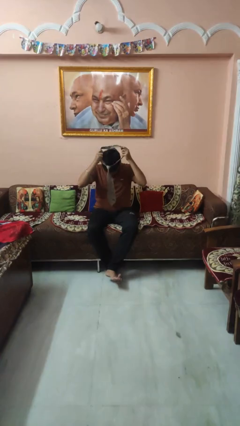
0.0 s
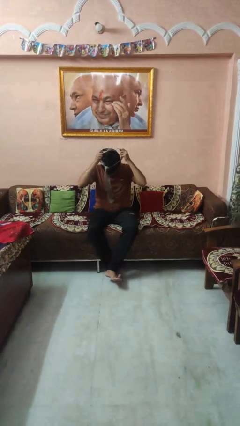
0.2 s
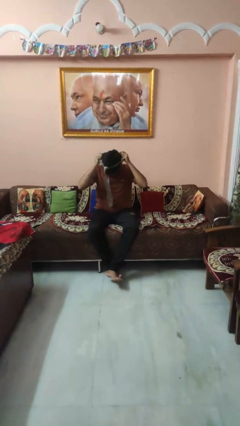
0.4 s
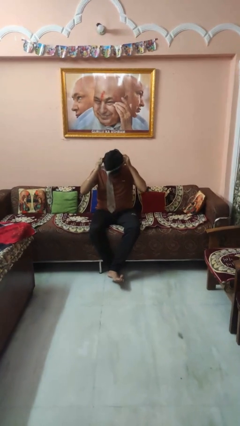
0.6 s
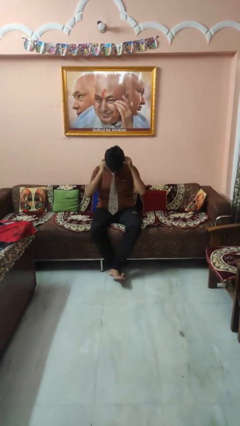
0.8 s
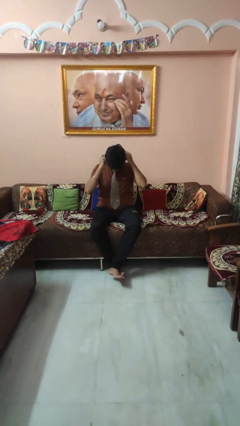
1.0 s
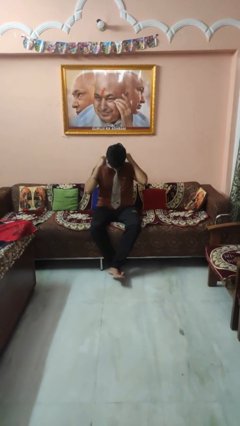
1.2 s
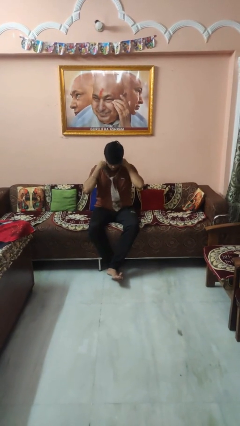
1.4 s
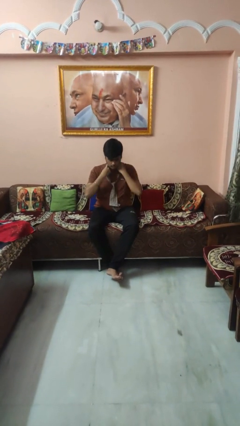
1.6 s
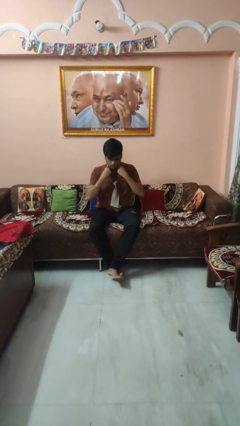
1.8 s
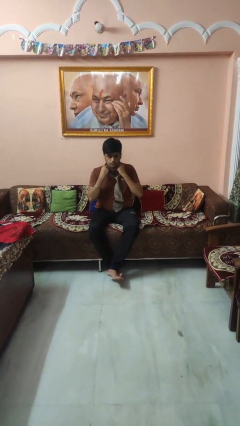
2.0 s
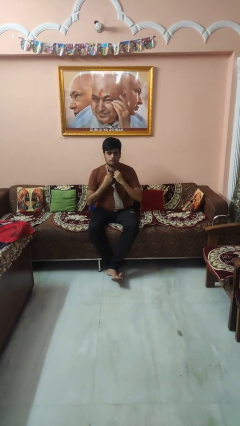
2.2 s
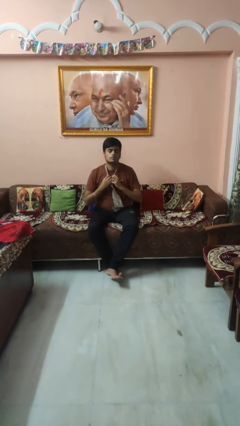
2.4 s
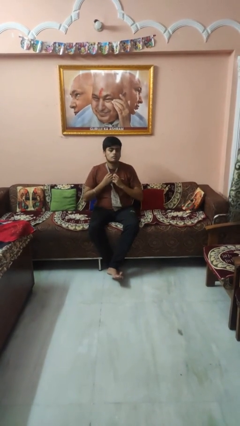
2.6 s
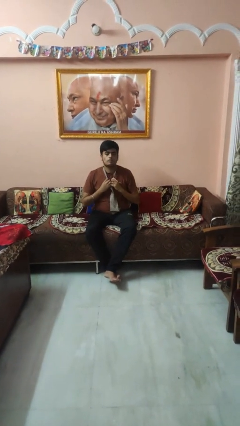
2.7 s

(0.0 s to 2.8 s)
person puts on necktie

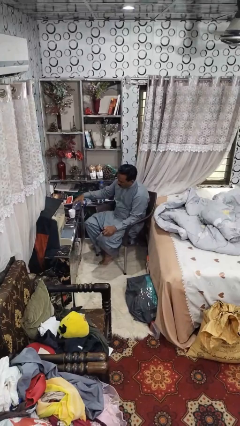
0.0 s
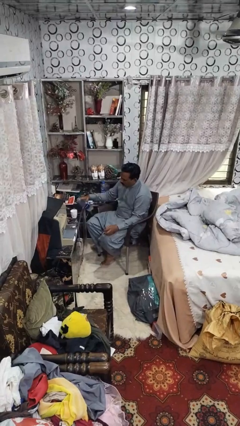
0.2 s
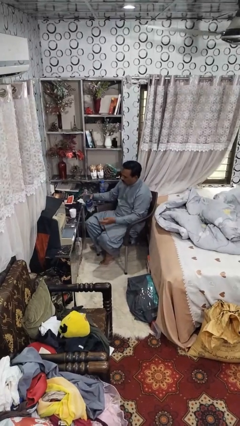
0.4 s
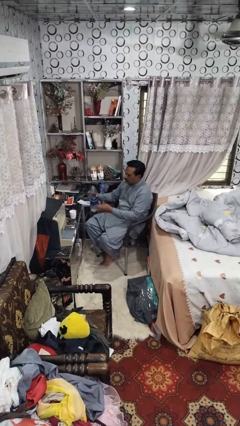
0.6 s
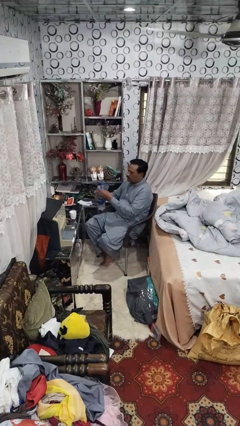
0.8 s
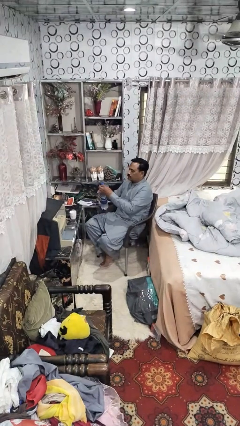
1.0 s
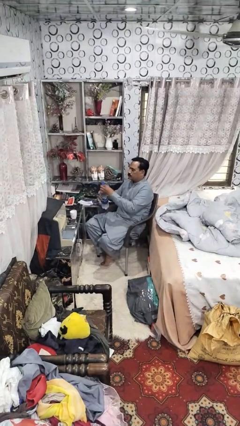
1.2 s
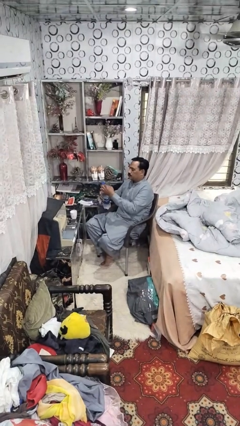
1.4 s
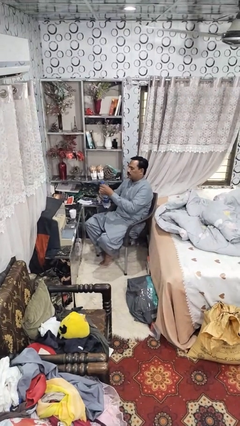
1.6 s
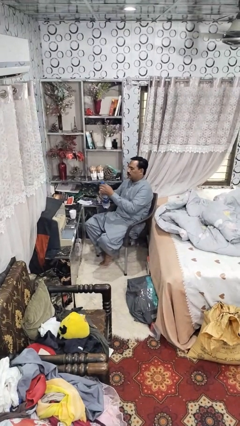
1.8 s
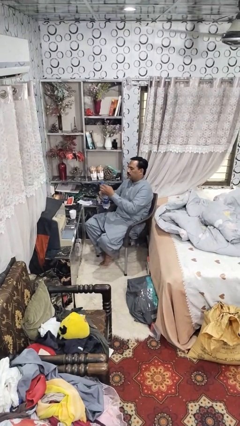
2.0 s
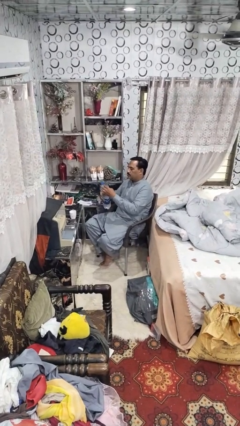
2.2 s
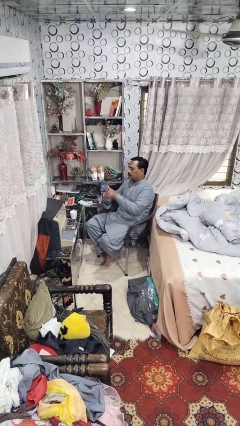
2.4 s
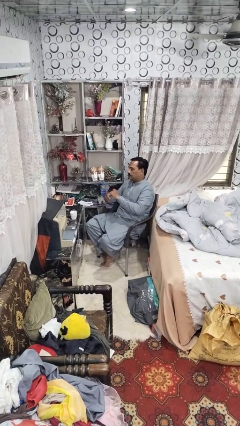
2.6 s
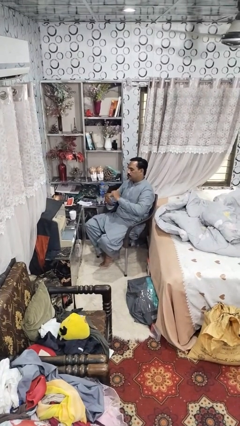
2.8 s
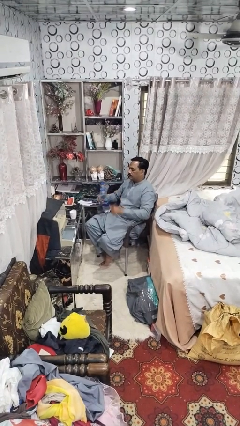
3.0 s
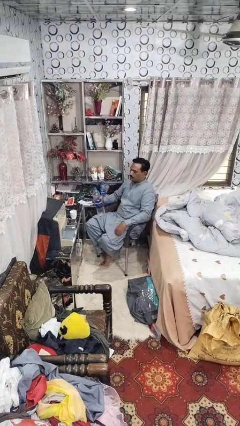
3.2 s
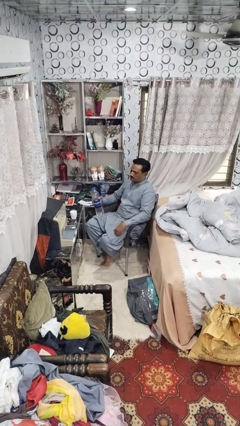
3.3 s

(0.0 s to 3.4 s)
person screws lid to bottle

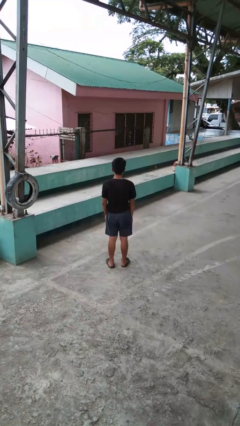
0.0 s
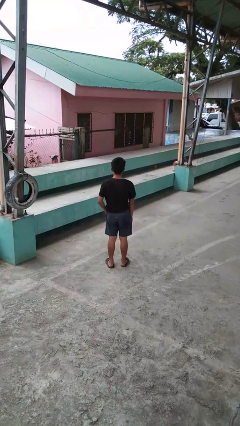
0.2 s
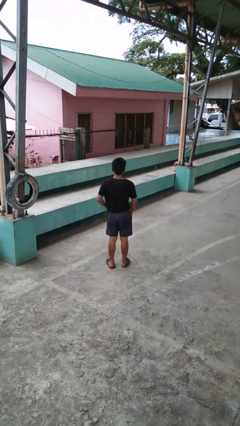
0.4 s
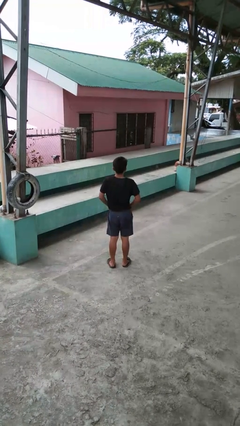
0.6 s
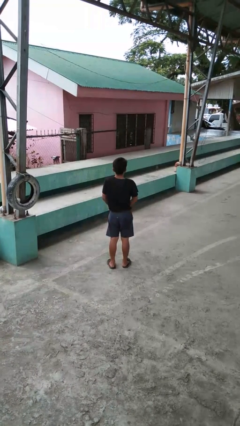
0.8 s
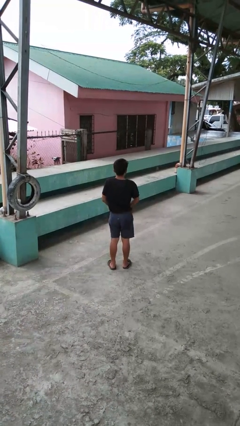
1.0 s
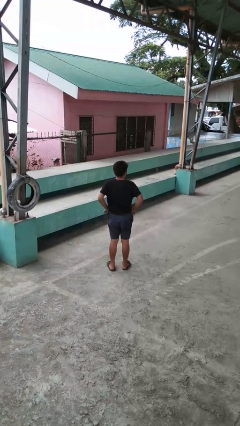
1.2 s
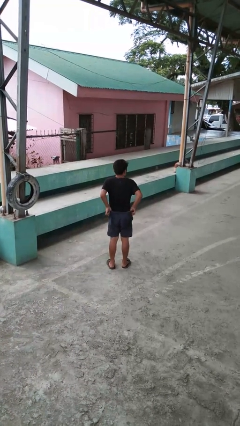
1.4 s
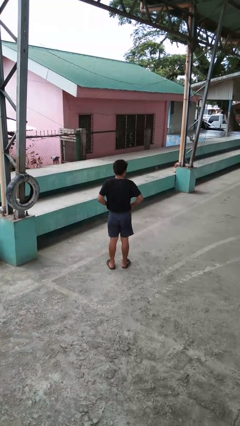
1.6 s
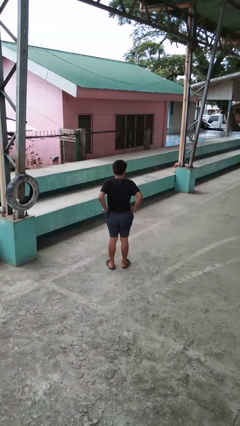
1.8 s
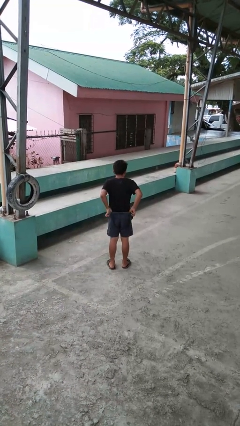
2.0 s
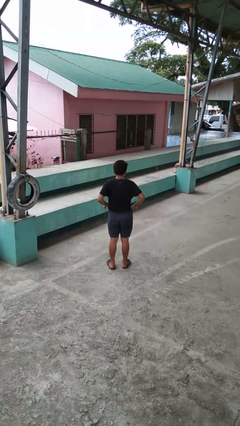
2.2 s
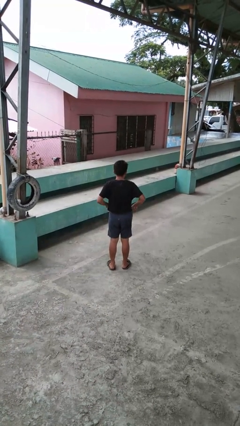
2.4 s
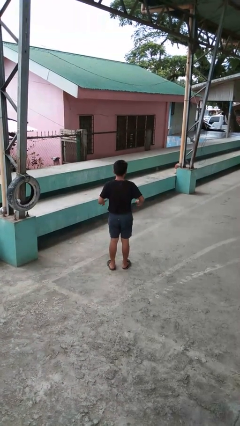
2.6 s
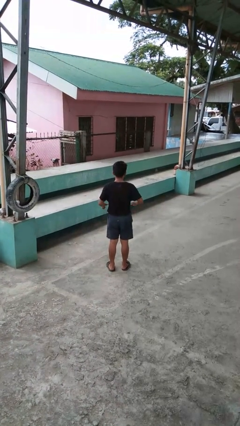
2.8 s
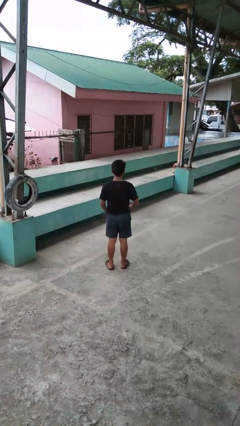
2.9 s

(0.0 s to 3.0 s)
person hikes up pants

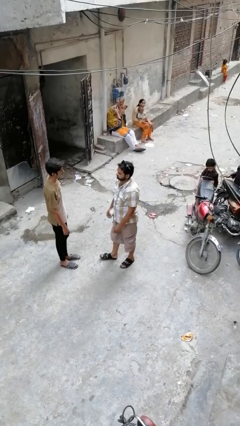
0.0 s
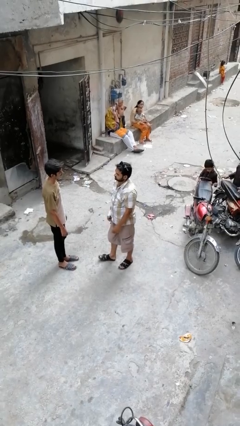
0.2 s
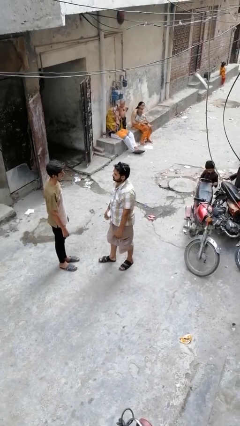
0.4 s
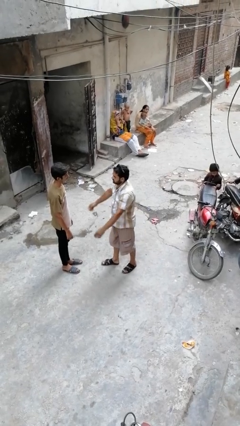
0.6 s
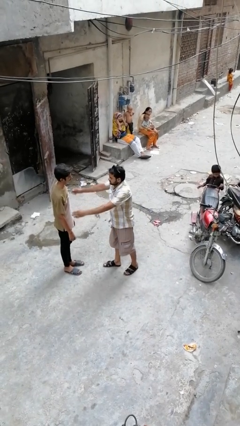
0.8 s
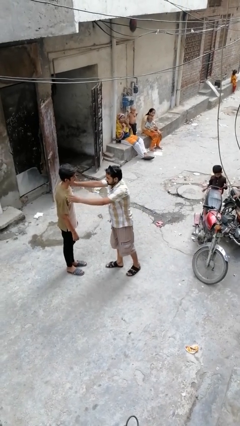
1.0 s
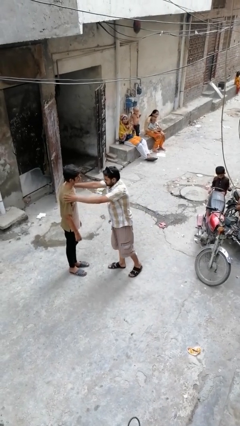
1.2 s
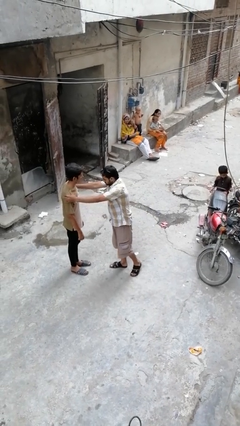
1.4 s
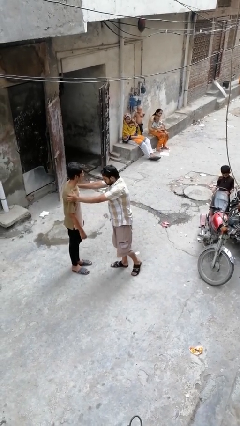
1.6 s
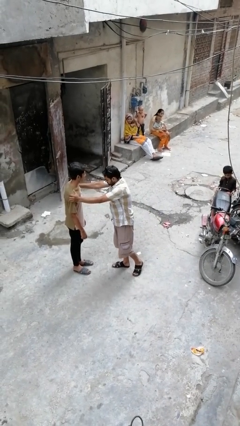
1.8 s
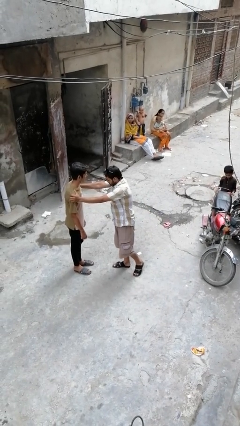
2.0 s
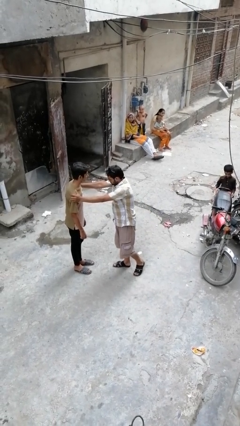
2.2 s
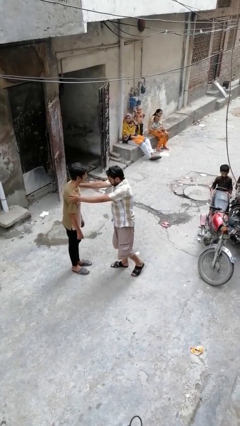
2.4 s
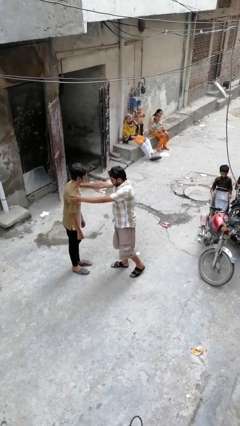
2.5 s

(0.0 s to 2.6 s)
person pounds shoulders of person

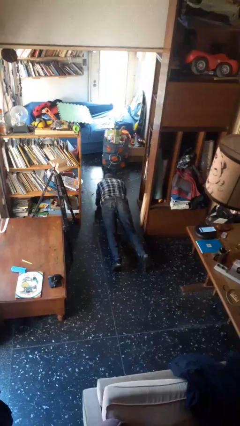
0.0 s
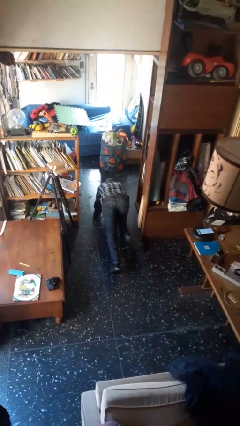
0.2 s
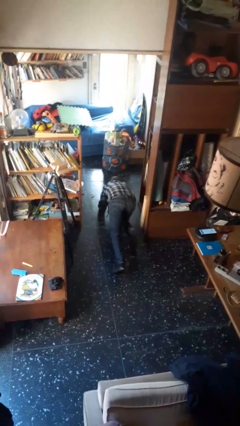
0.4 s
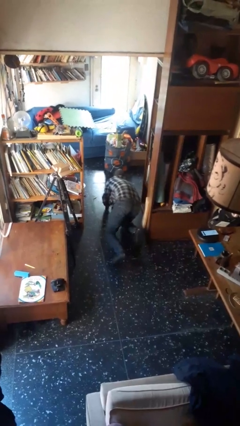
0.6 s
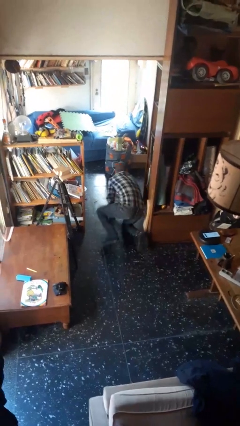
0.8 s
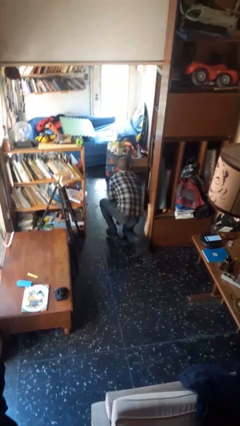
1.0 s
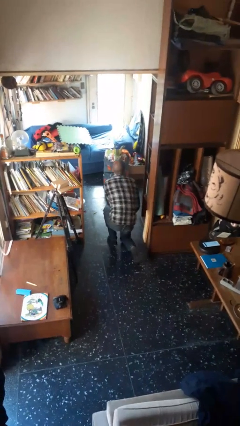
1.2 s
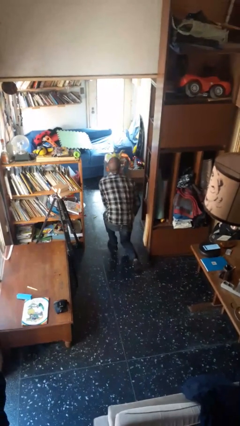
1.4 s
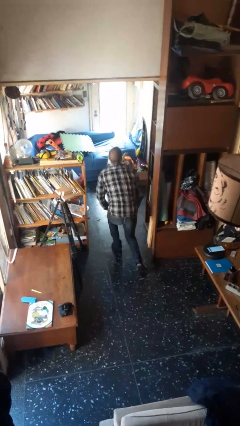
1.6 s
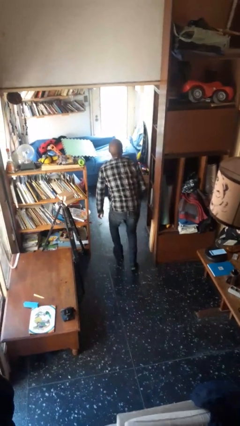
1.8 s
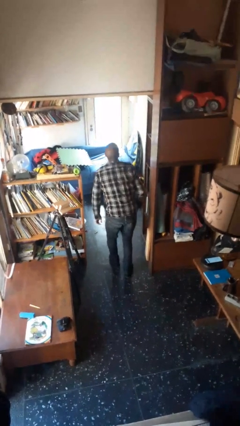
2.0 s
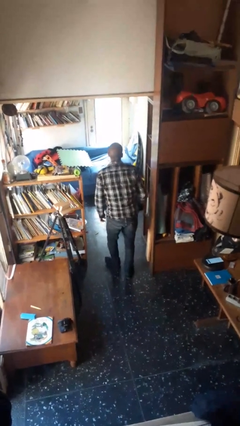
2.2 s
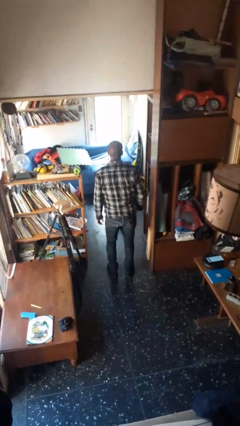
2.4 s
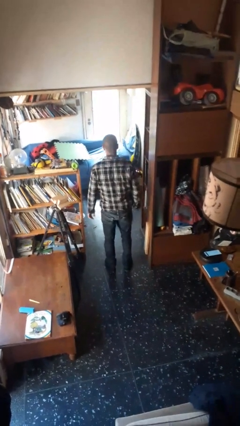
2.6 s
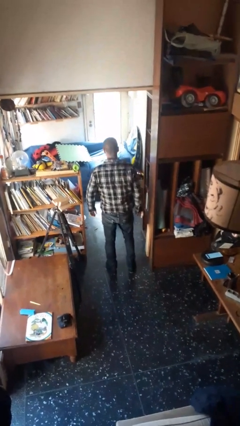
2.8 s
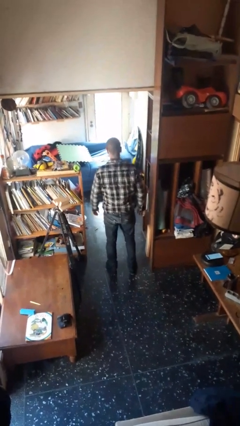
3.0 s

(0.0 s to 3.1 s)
person stands up from floor

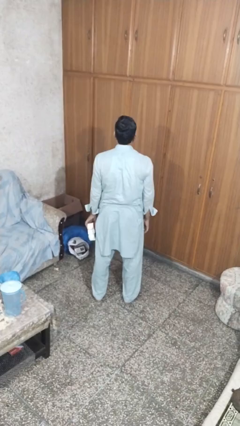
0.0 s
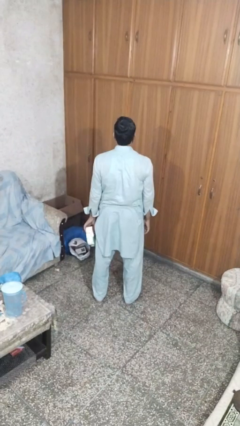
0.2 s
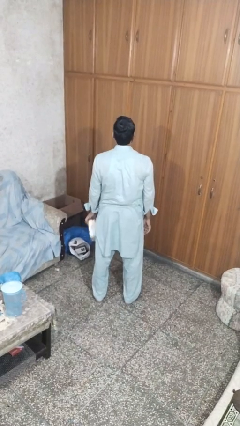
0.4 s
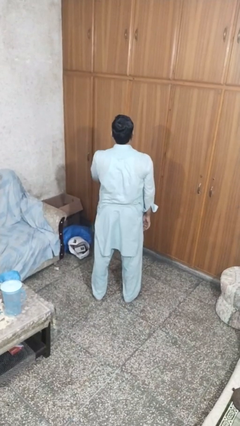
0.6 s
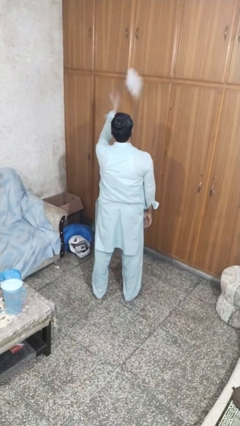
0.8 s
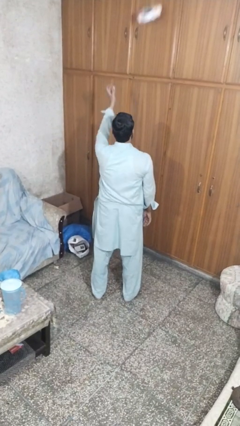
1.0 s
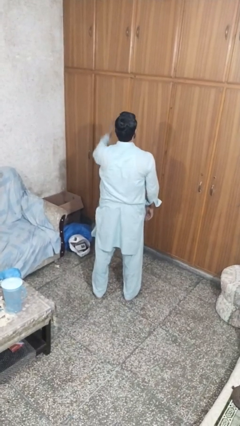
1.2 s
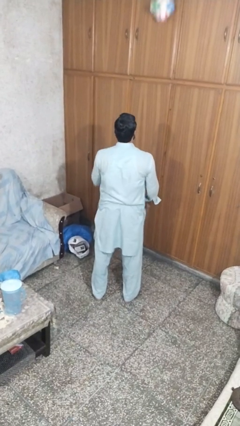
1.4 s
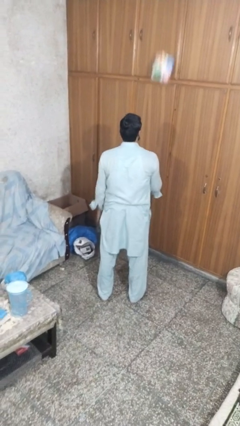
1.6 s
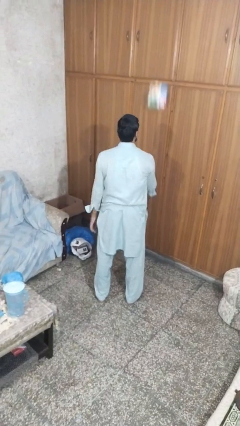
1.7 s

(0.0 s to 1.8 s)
person drops object

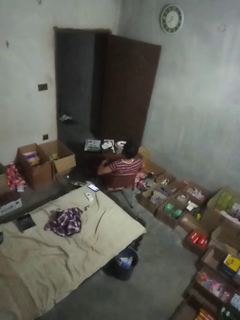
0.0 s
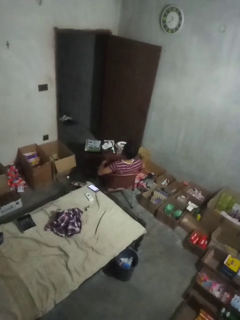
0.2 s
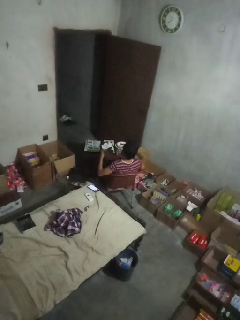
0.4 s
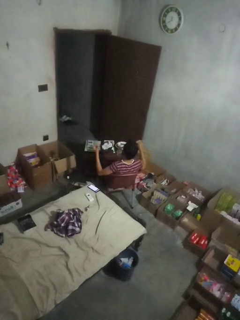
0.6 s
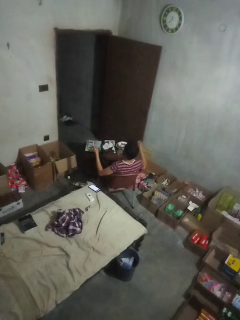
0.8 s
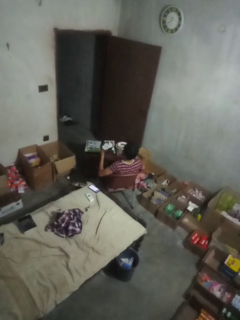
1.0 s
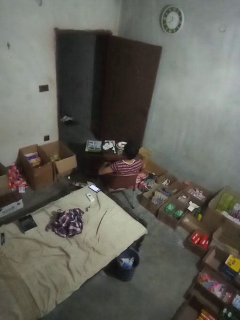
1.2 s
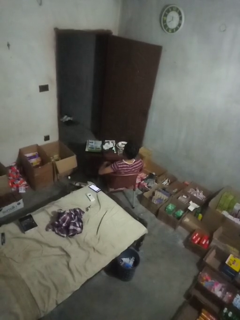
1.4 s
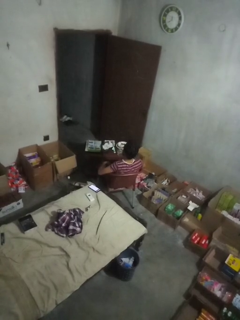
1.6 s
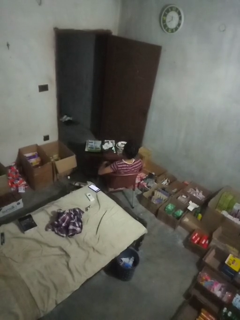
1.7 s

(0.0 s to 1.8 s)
person snaps fingers
